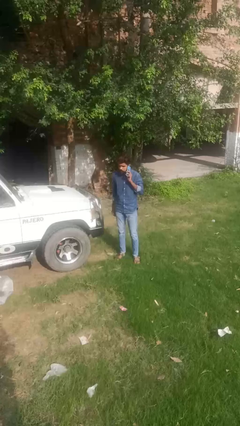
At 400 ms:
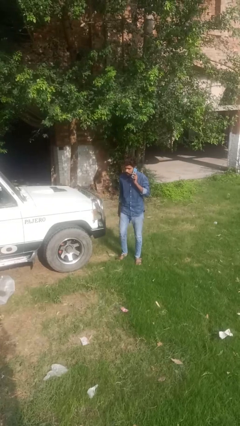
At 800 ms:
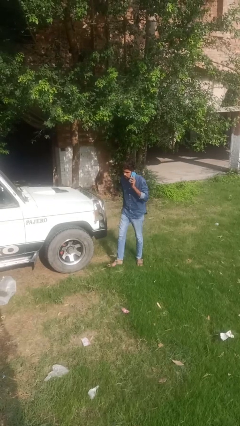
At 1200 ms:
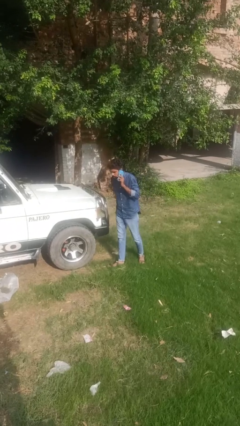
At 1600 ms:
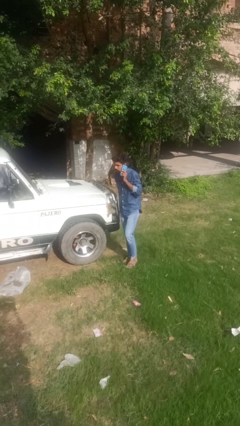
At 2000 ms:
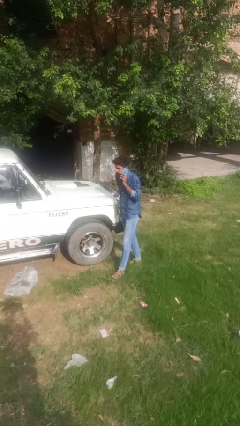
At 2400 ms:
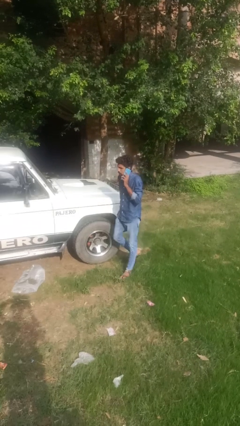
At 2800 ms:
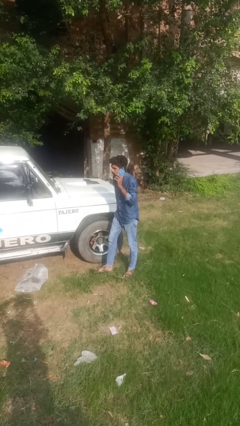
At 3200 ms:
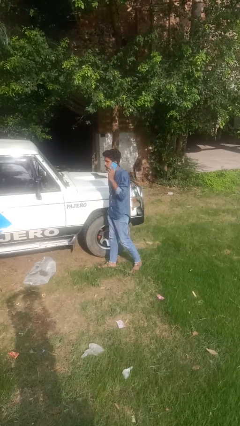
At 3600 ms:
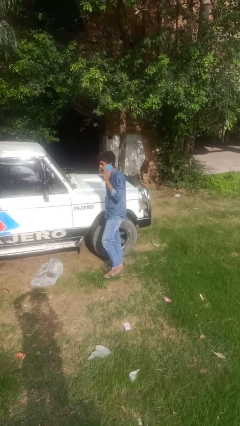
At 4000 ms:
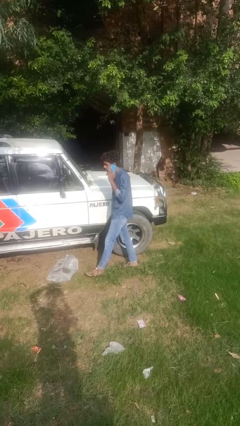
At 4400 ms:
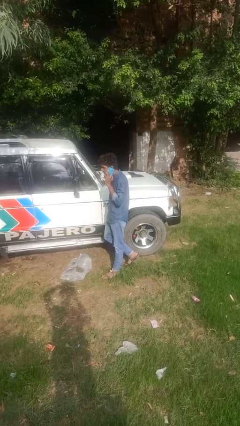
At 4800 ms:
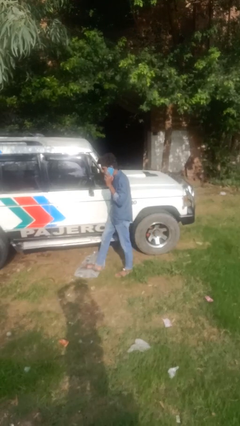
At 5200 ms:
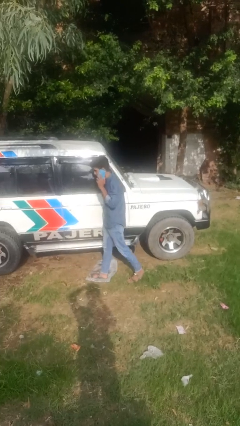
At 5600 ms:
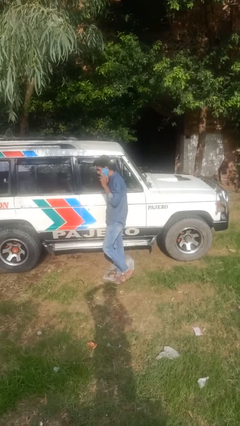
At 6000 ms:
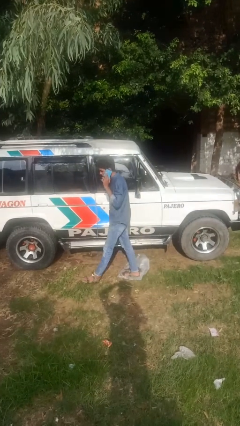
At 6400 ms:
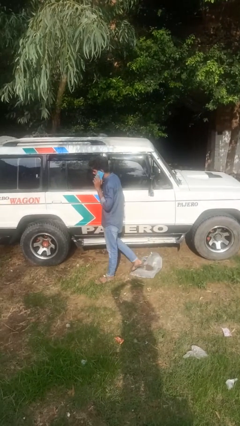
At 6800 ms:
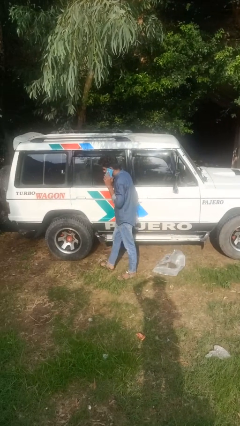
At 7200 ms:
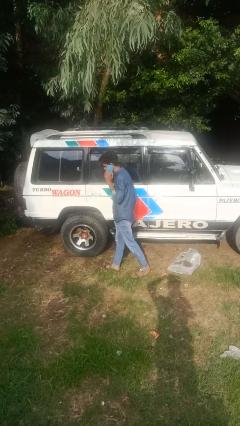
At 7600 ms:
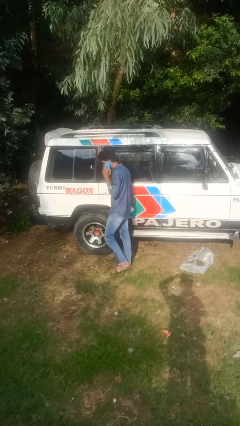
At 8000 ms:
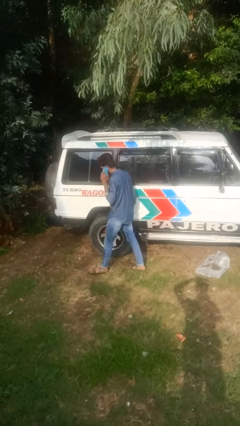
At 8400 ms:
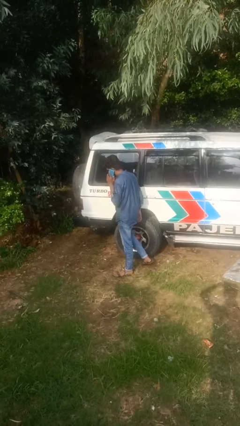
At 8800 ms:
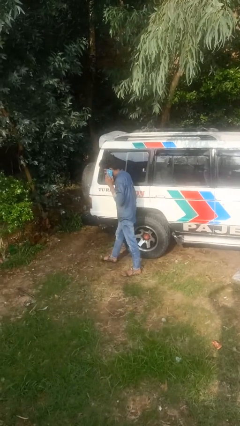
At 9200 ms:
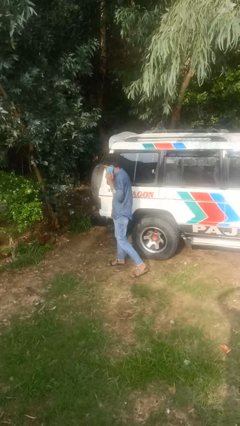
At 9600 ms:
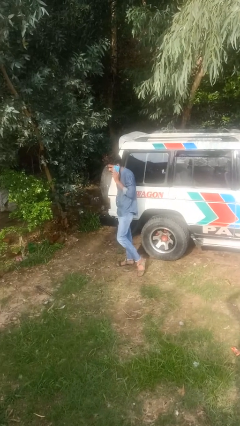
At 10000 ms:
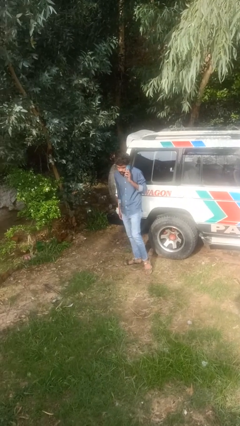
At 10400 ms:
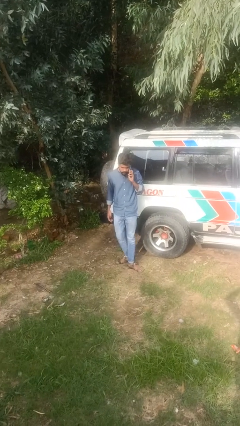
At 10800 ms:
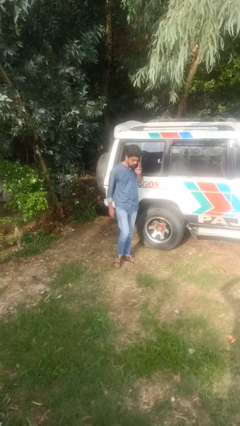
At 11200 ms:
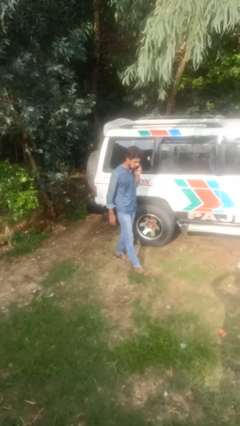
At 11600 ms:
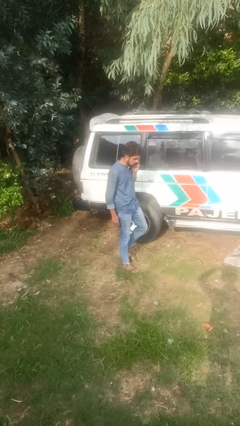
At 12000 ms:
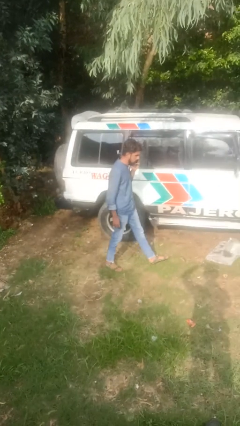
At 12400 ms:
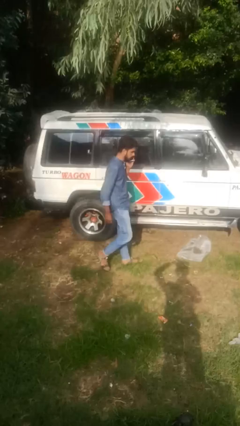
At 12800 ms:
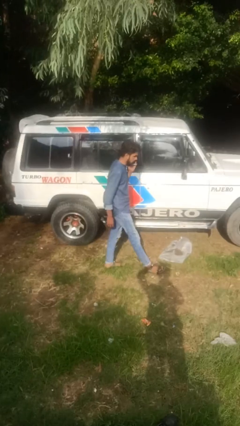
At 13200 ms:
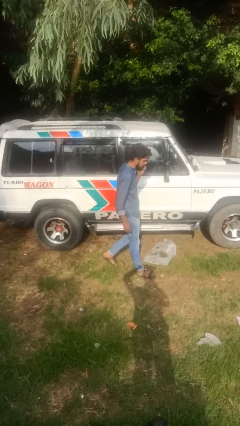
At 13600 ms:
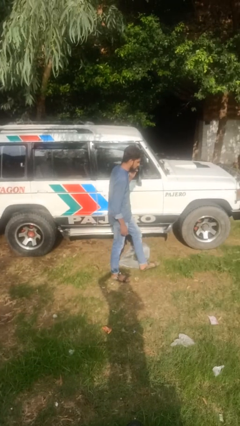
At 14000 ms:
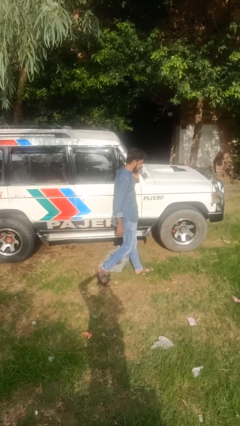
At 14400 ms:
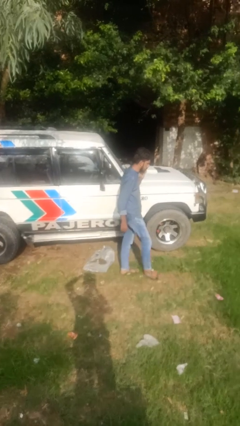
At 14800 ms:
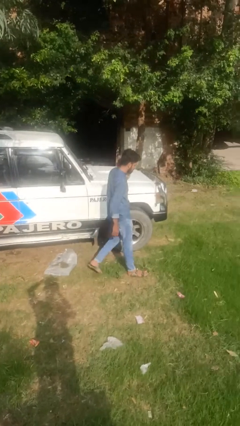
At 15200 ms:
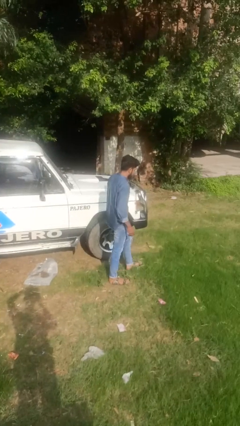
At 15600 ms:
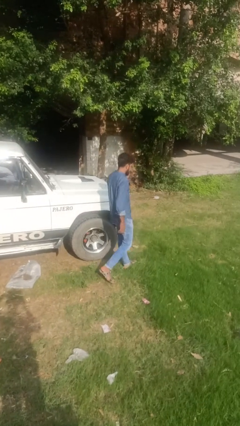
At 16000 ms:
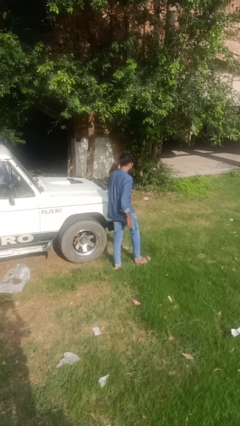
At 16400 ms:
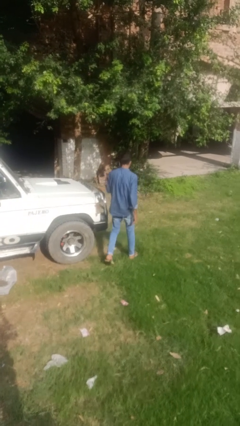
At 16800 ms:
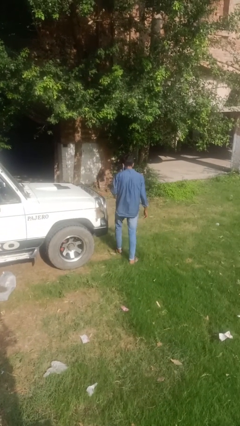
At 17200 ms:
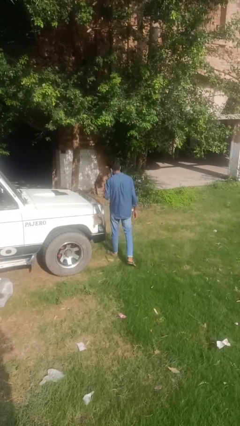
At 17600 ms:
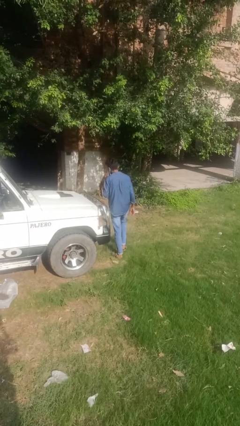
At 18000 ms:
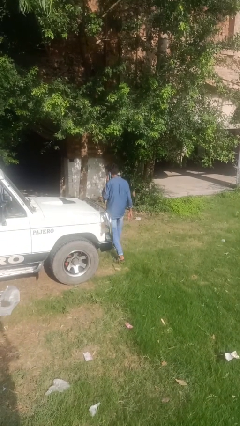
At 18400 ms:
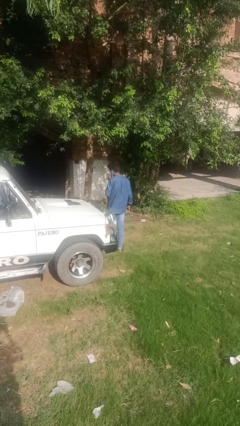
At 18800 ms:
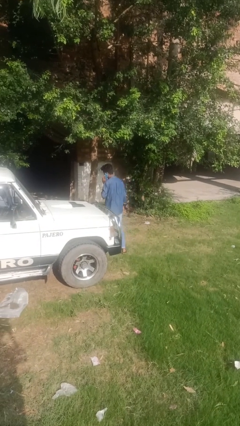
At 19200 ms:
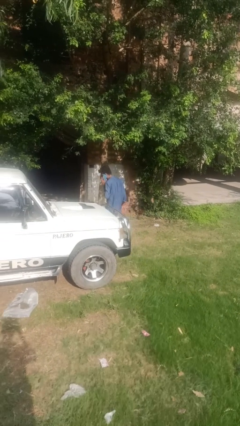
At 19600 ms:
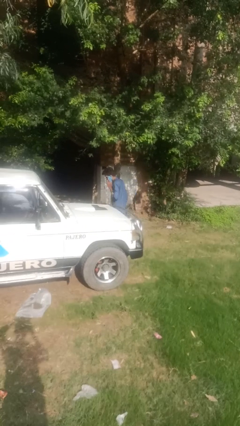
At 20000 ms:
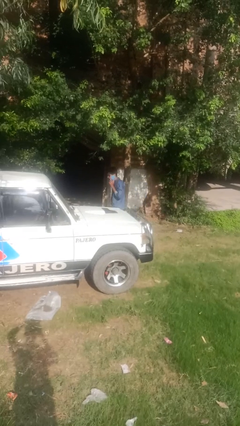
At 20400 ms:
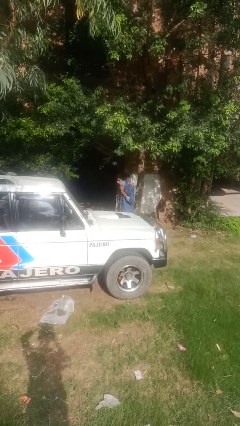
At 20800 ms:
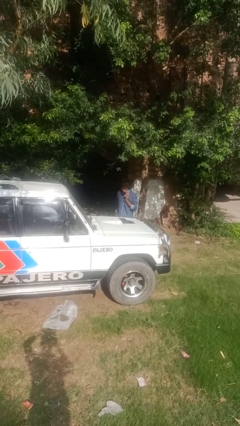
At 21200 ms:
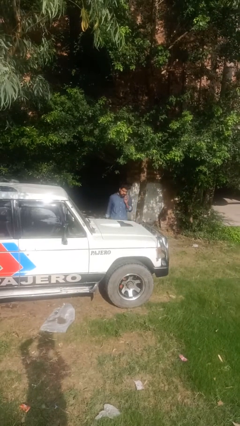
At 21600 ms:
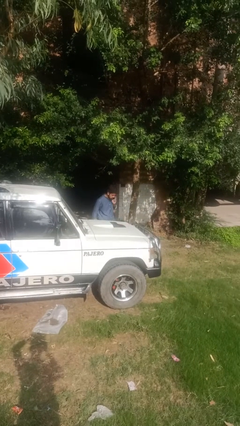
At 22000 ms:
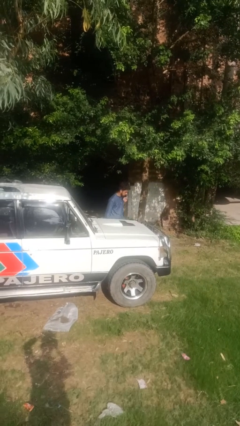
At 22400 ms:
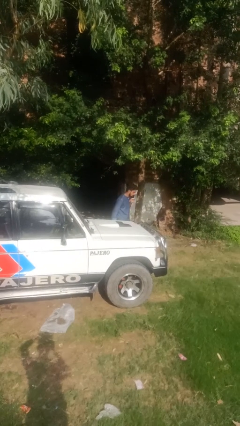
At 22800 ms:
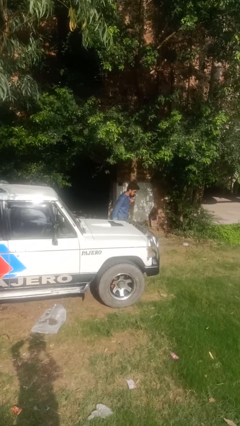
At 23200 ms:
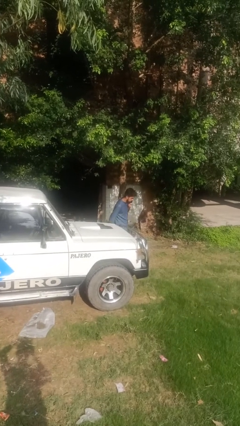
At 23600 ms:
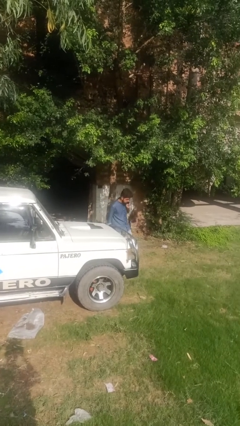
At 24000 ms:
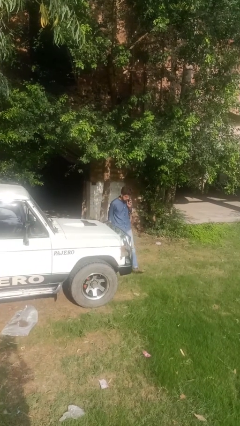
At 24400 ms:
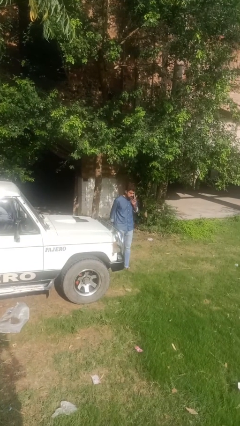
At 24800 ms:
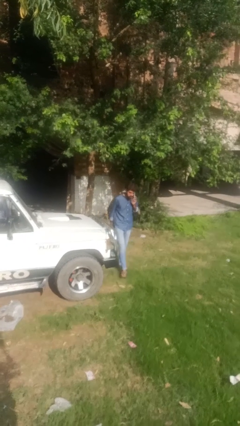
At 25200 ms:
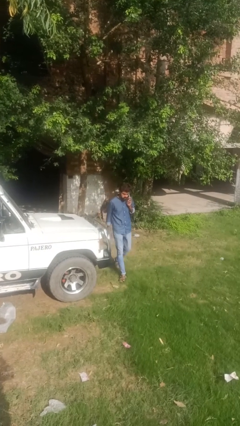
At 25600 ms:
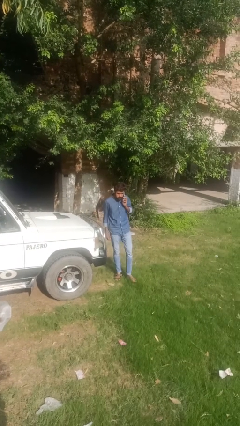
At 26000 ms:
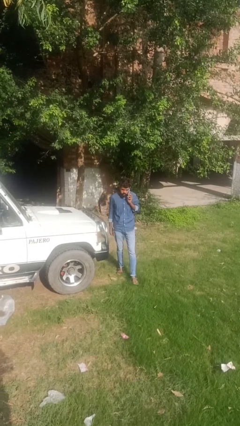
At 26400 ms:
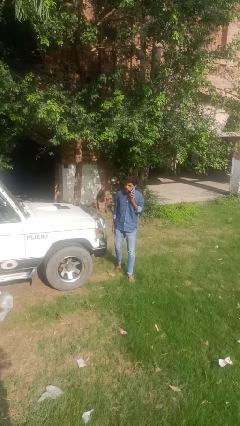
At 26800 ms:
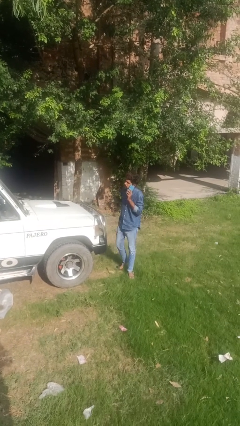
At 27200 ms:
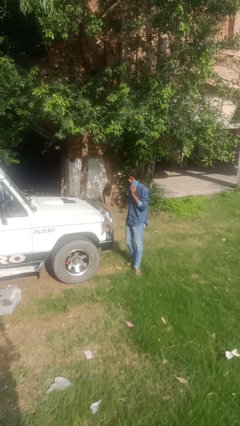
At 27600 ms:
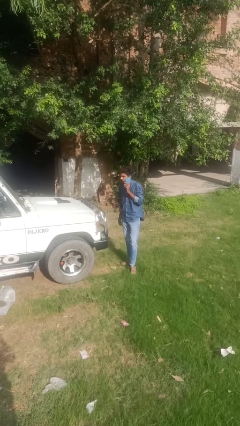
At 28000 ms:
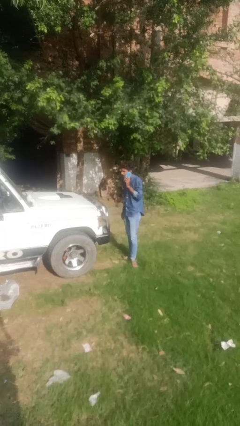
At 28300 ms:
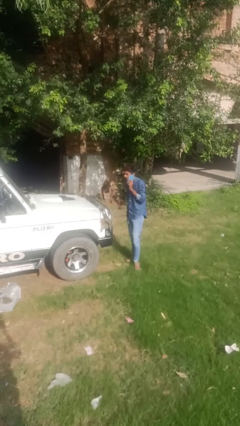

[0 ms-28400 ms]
person walks around car

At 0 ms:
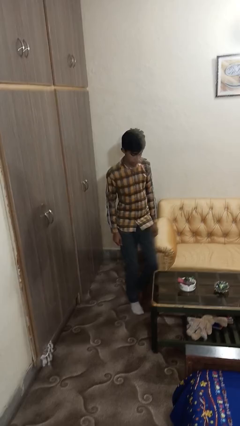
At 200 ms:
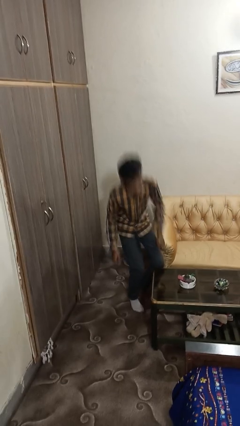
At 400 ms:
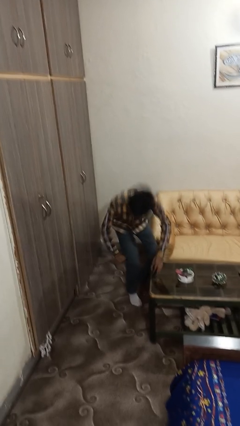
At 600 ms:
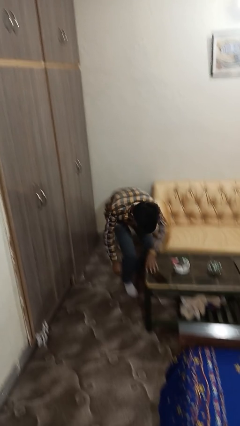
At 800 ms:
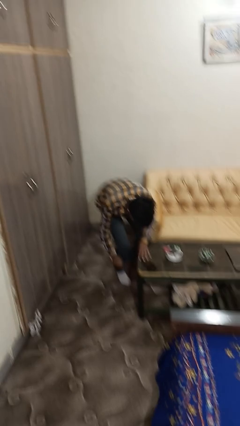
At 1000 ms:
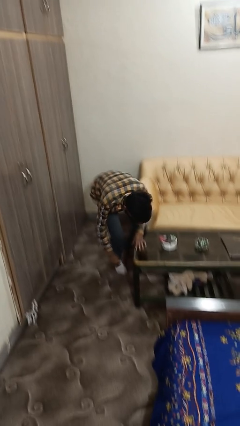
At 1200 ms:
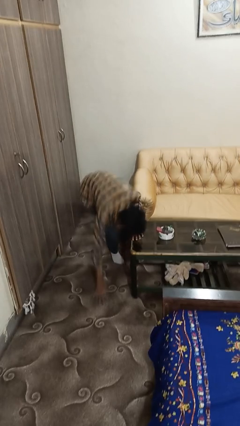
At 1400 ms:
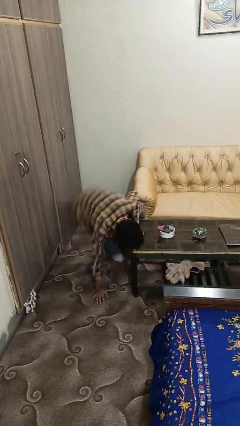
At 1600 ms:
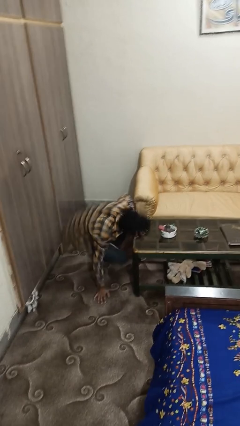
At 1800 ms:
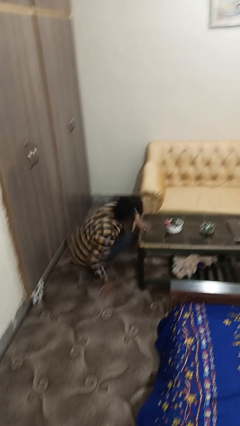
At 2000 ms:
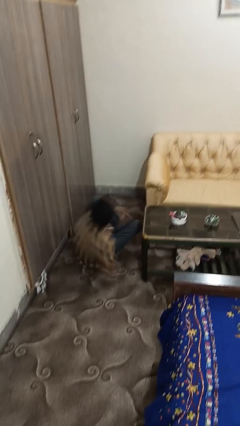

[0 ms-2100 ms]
person trips on object on floor

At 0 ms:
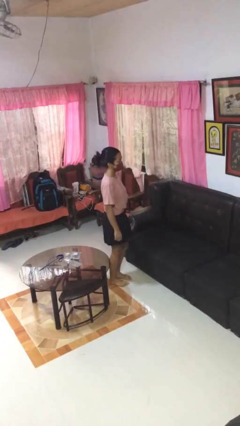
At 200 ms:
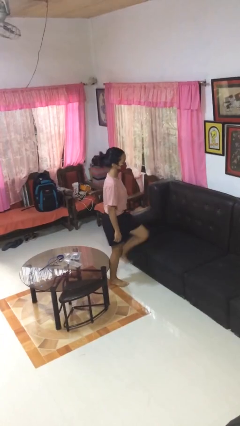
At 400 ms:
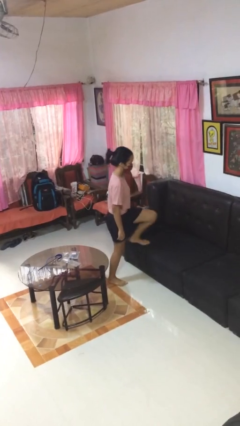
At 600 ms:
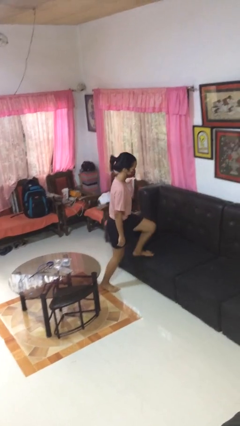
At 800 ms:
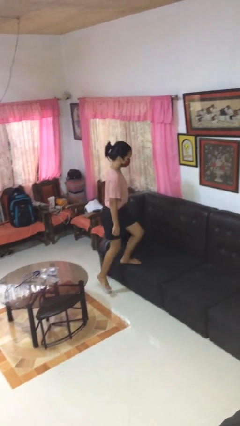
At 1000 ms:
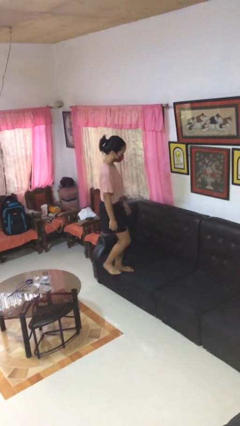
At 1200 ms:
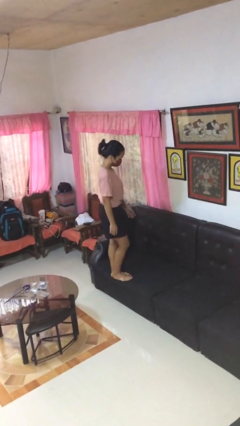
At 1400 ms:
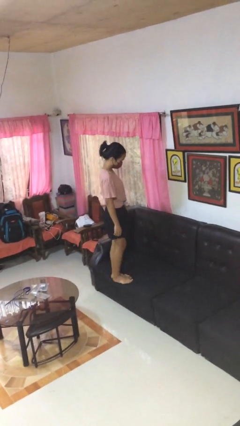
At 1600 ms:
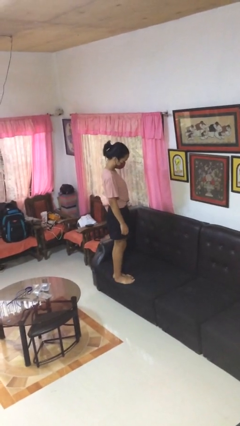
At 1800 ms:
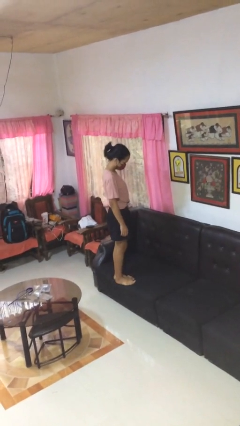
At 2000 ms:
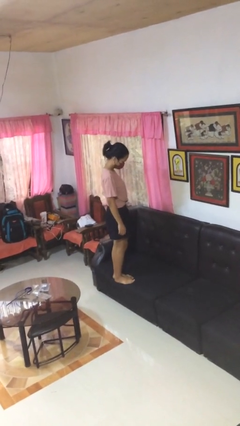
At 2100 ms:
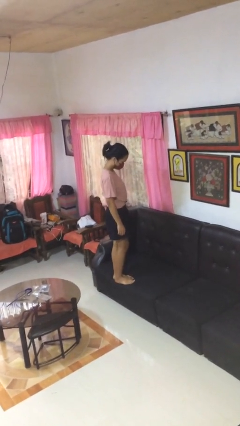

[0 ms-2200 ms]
person climbs on couch
